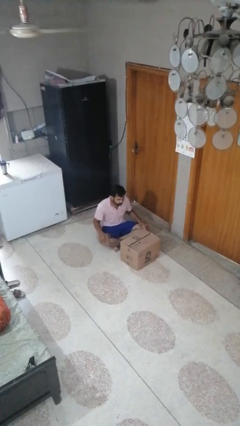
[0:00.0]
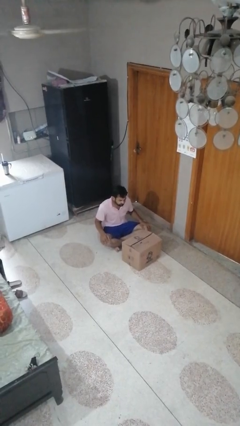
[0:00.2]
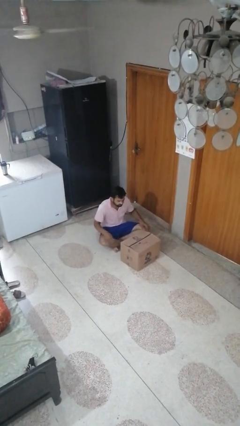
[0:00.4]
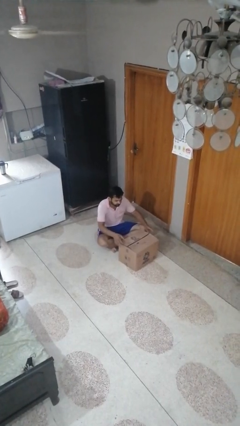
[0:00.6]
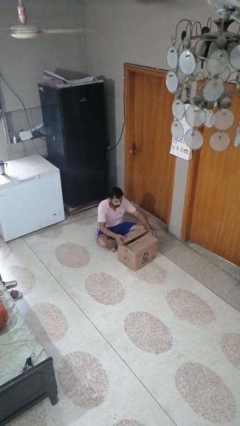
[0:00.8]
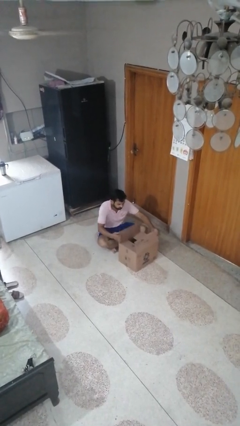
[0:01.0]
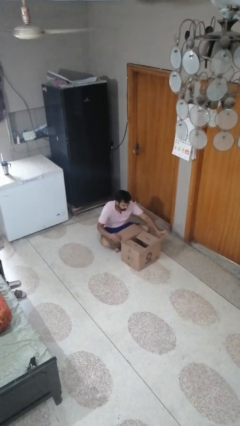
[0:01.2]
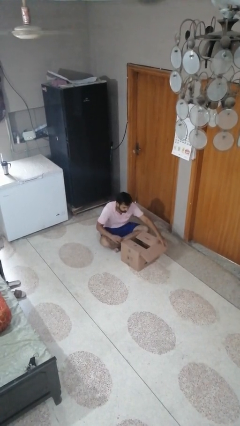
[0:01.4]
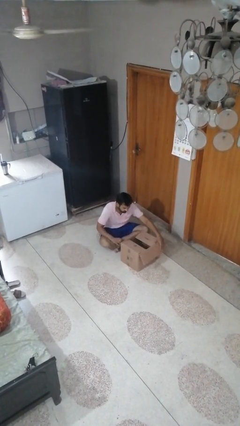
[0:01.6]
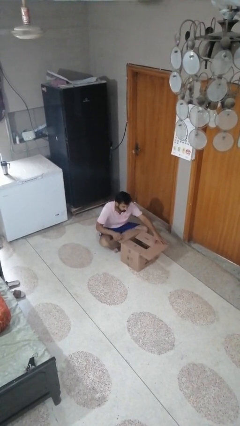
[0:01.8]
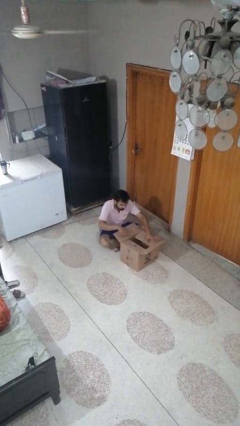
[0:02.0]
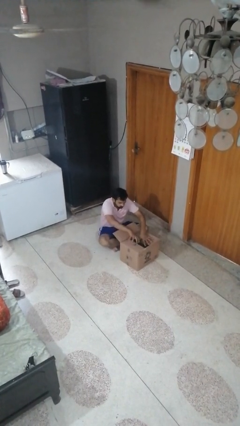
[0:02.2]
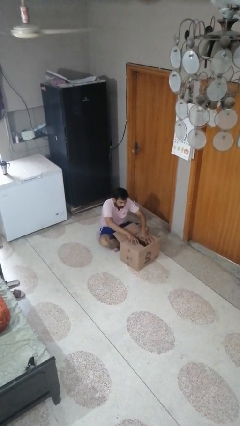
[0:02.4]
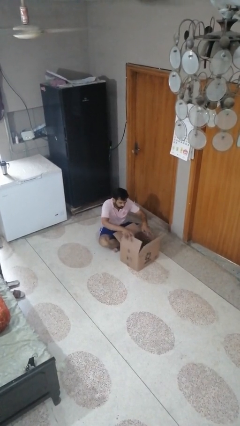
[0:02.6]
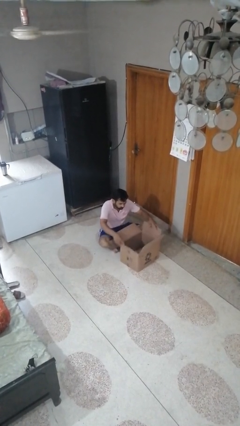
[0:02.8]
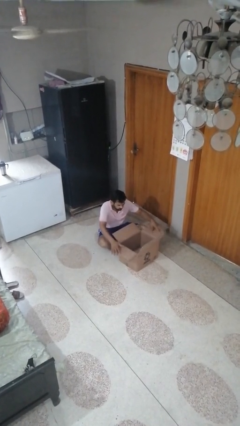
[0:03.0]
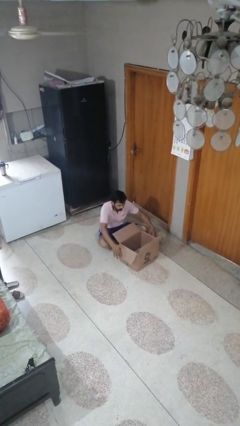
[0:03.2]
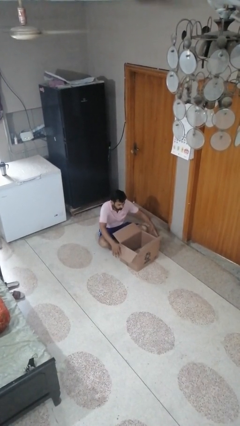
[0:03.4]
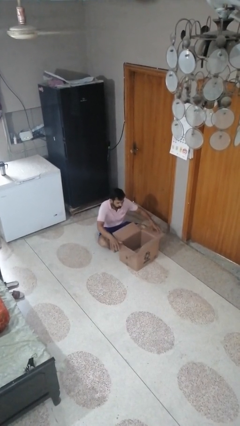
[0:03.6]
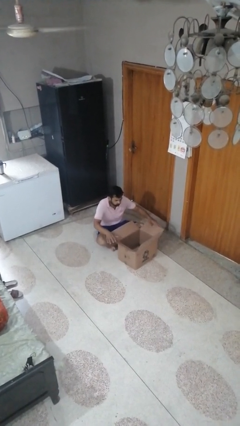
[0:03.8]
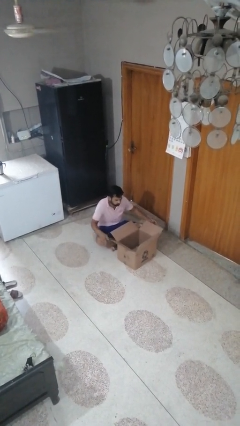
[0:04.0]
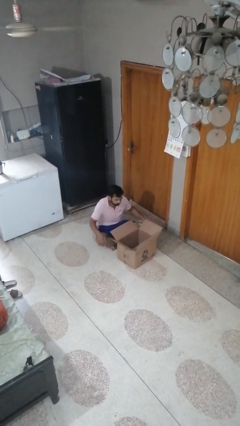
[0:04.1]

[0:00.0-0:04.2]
person opens box

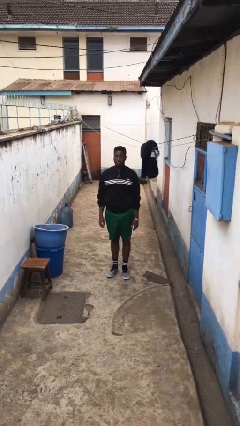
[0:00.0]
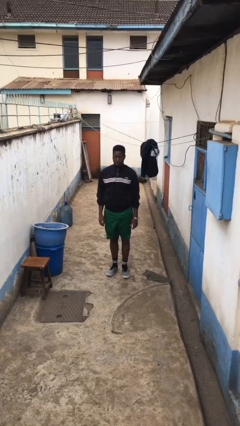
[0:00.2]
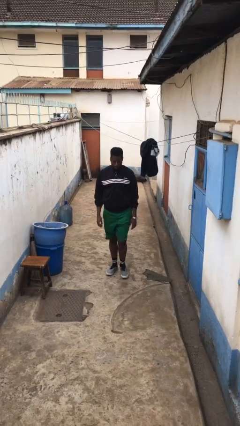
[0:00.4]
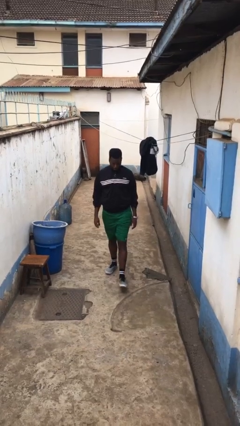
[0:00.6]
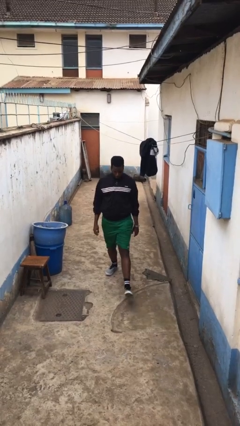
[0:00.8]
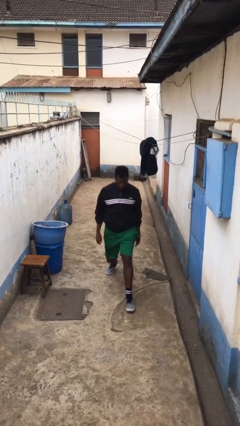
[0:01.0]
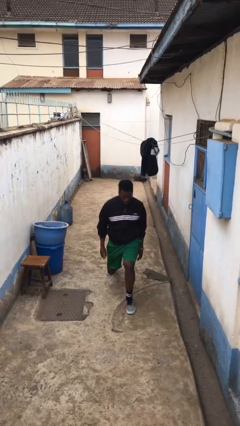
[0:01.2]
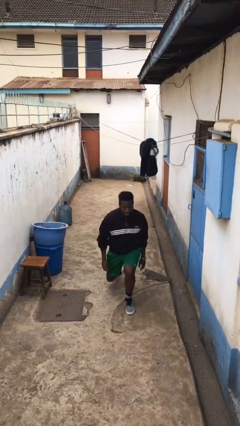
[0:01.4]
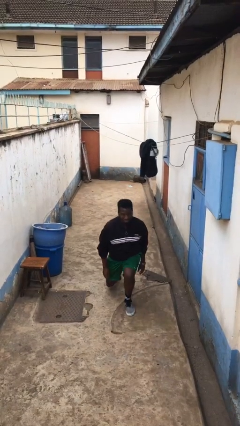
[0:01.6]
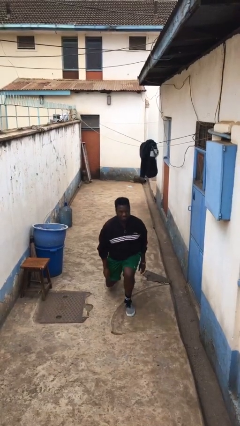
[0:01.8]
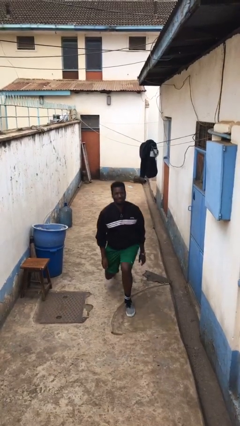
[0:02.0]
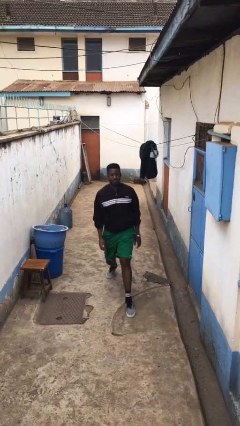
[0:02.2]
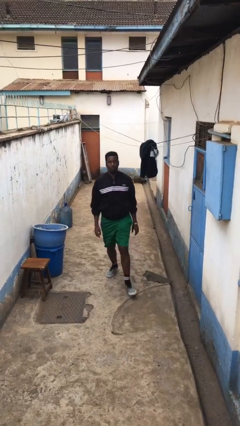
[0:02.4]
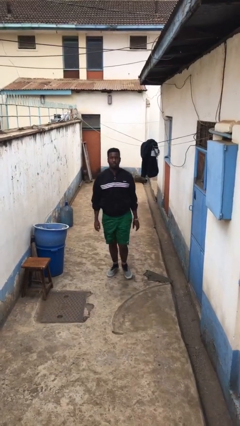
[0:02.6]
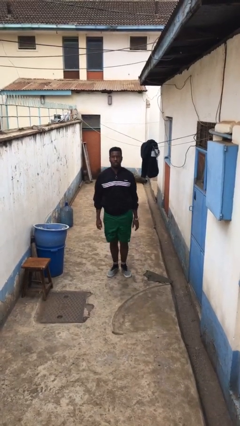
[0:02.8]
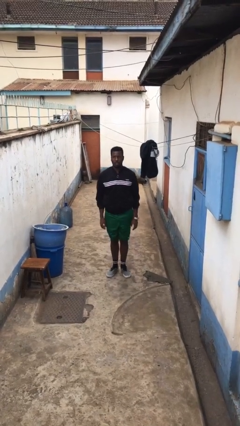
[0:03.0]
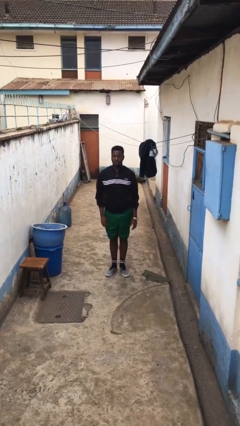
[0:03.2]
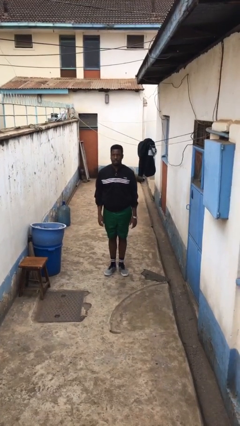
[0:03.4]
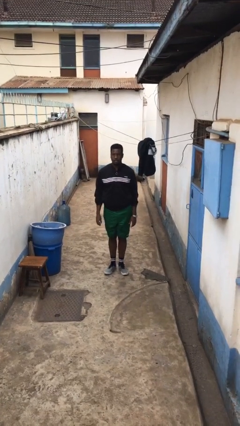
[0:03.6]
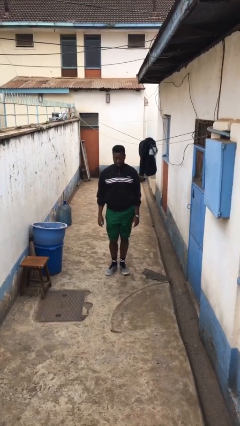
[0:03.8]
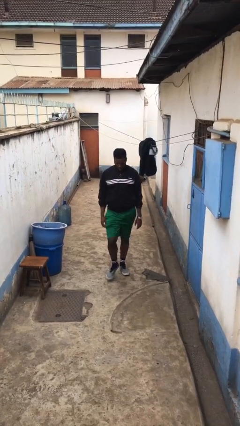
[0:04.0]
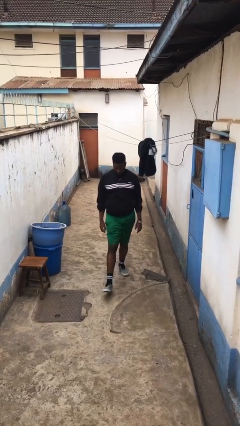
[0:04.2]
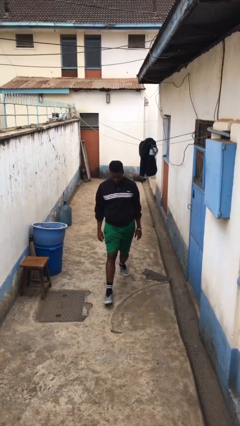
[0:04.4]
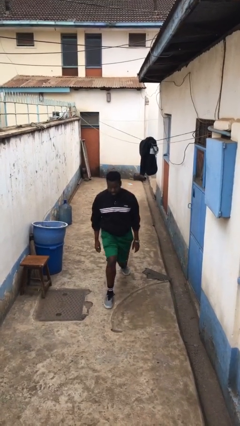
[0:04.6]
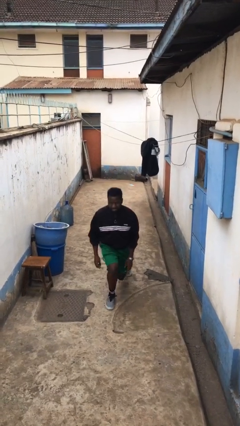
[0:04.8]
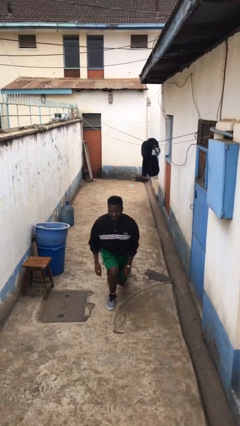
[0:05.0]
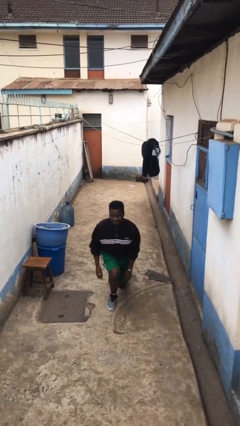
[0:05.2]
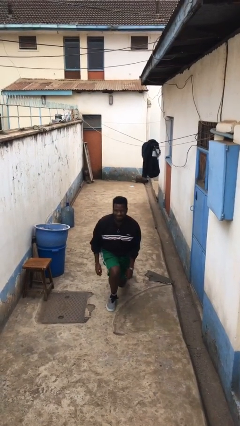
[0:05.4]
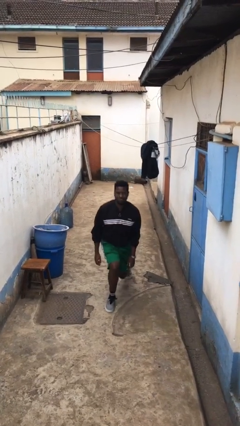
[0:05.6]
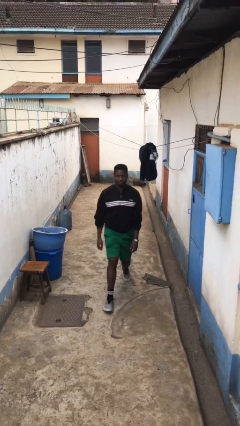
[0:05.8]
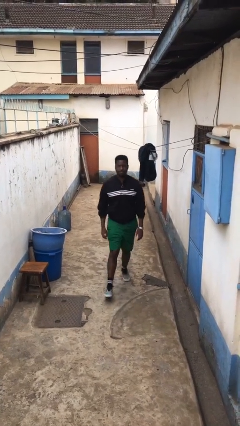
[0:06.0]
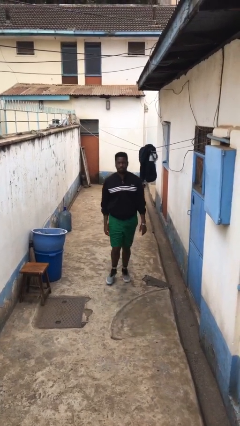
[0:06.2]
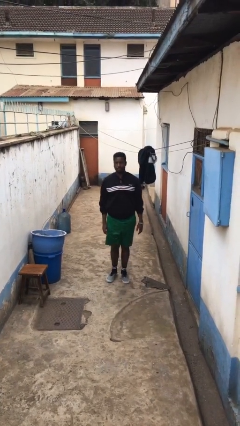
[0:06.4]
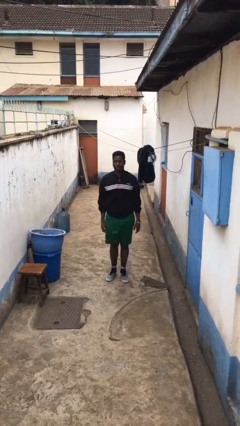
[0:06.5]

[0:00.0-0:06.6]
person exercises with lunges

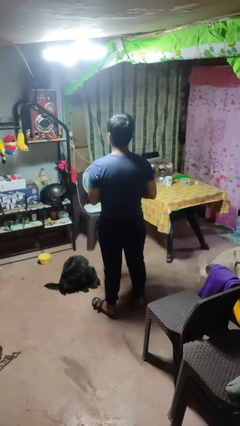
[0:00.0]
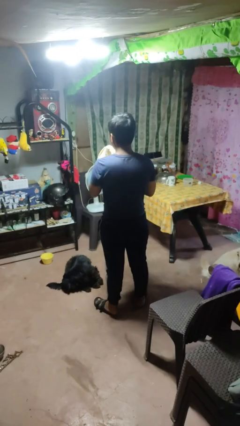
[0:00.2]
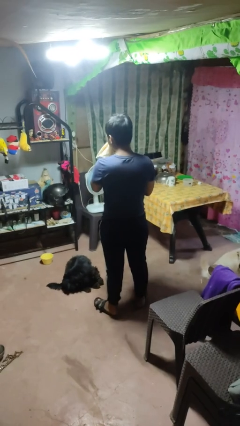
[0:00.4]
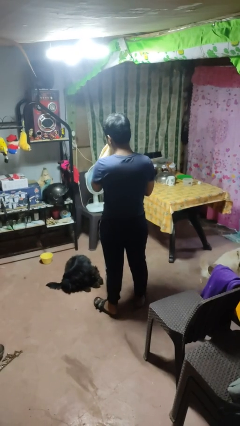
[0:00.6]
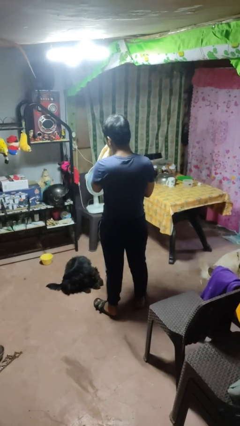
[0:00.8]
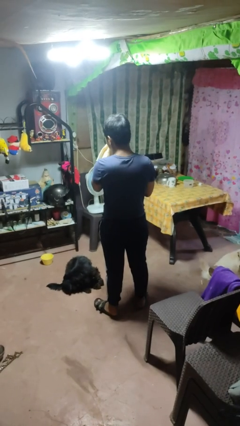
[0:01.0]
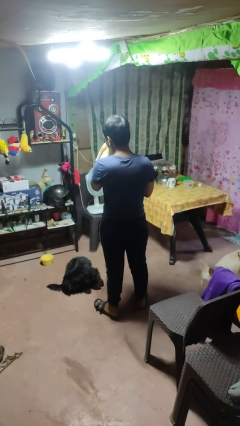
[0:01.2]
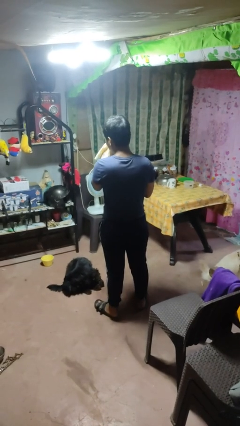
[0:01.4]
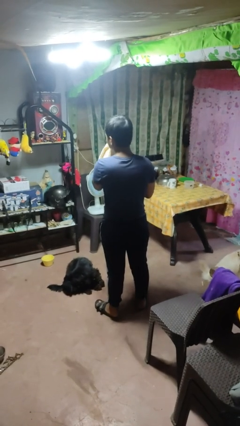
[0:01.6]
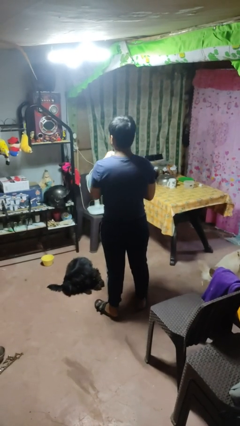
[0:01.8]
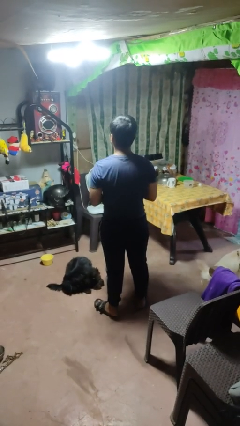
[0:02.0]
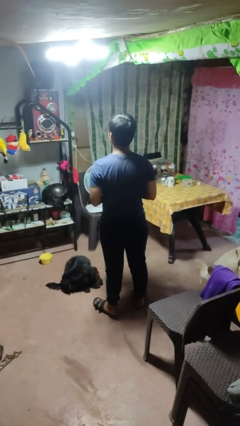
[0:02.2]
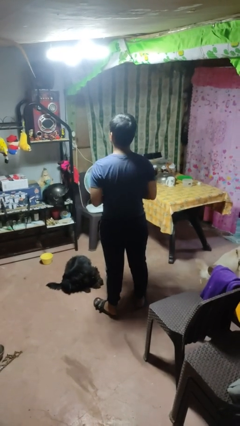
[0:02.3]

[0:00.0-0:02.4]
person blows nose

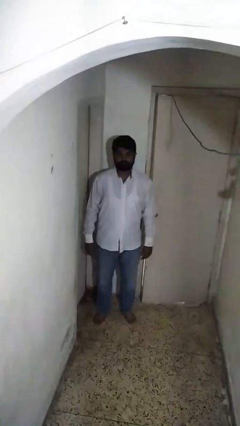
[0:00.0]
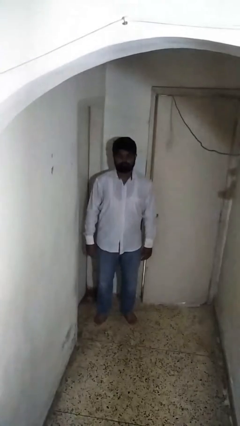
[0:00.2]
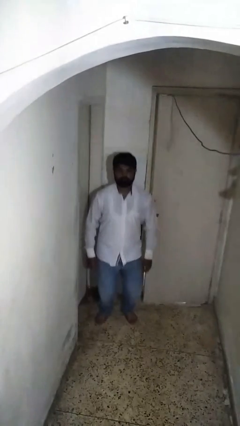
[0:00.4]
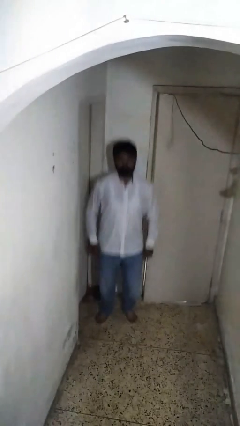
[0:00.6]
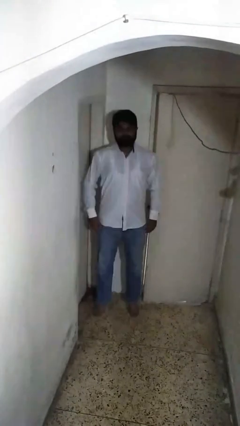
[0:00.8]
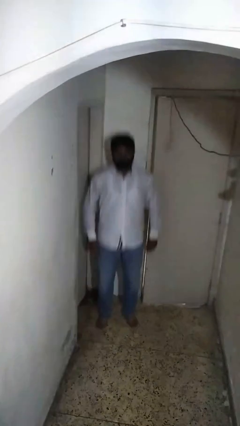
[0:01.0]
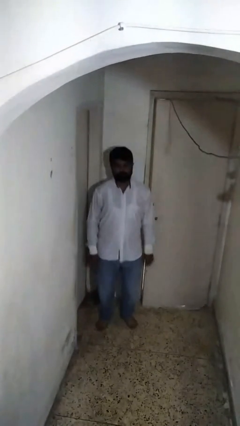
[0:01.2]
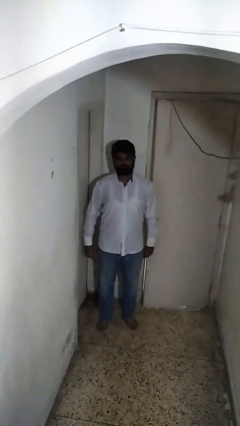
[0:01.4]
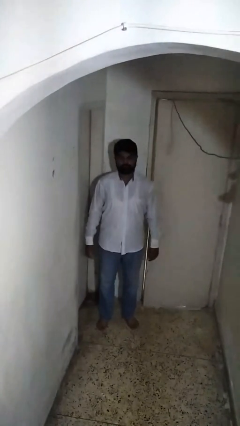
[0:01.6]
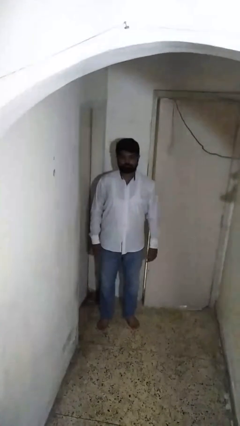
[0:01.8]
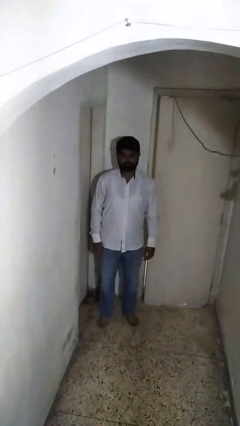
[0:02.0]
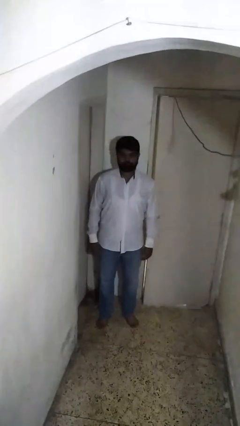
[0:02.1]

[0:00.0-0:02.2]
person jumps

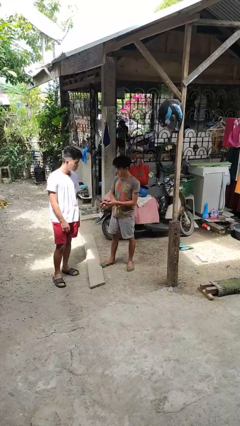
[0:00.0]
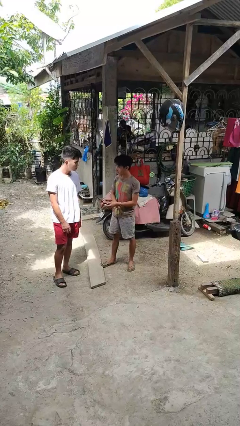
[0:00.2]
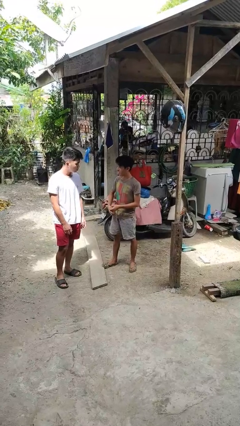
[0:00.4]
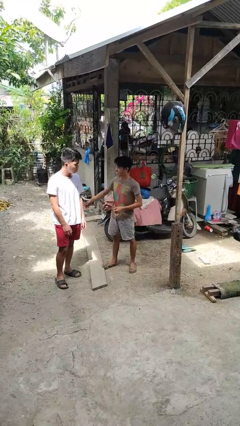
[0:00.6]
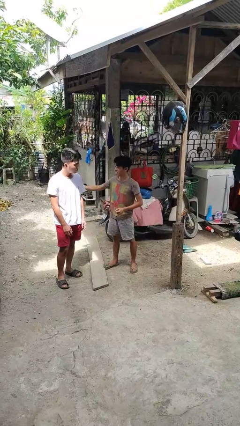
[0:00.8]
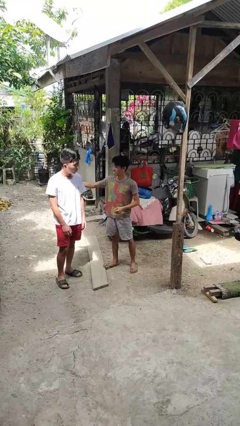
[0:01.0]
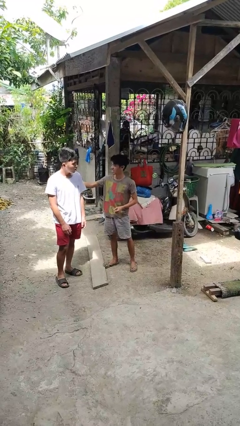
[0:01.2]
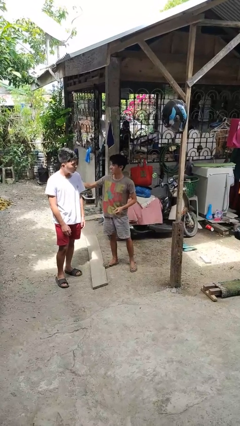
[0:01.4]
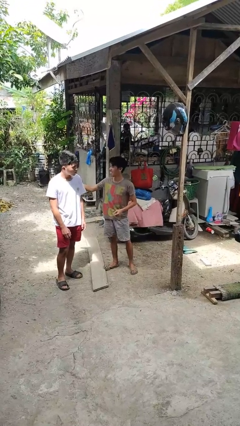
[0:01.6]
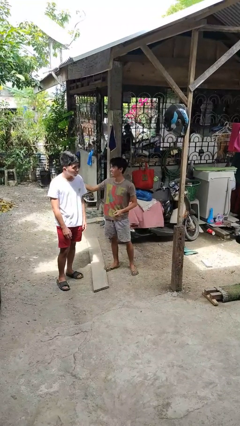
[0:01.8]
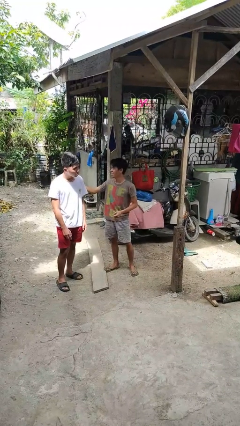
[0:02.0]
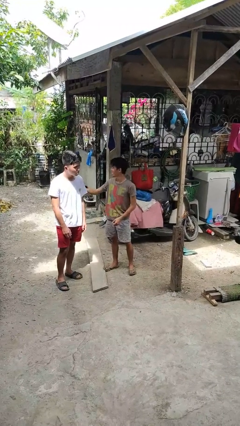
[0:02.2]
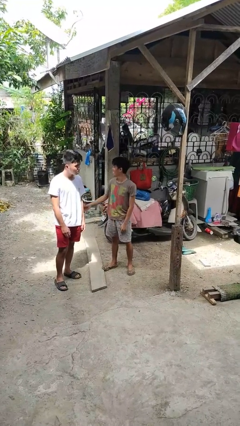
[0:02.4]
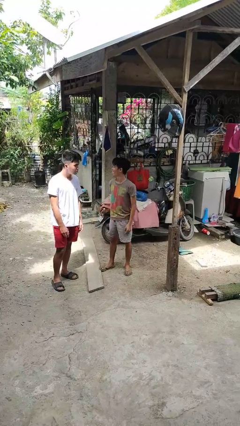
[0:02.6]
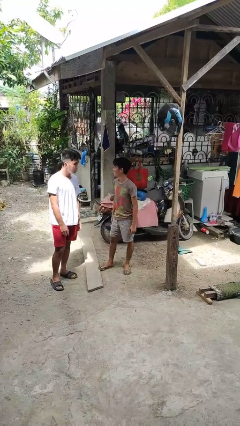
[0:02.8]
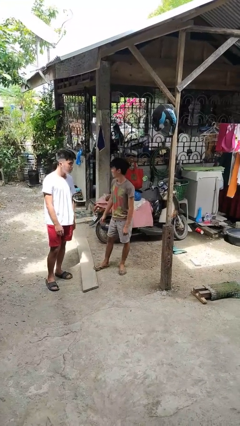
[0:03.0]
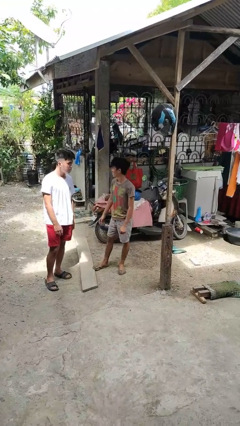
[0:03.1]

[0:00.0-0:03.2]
person touches back of person
